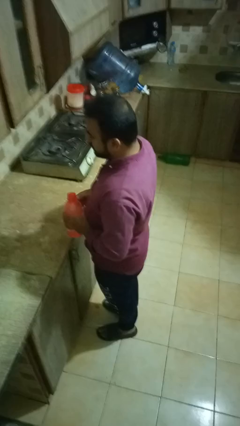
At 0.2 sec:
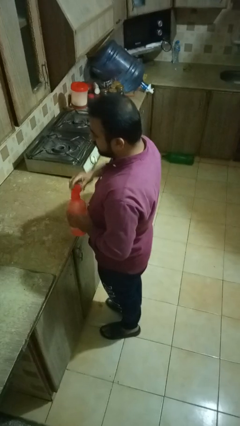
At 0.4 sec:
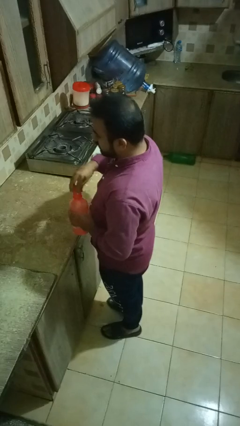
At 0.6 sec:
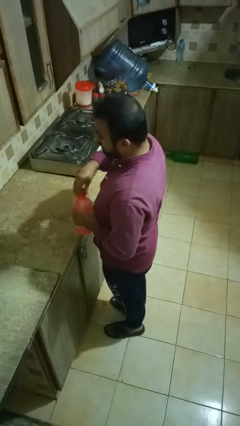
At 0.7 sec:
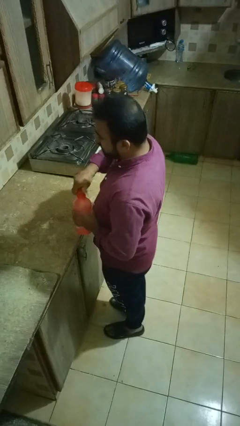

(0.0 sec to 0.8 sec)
person screws lid to bottle

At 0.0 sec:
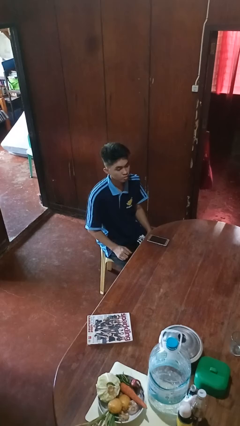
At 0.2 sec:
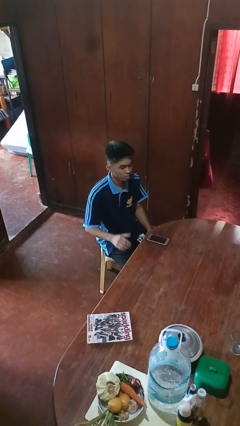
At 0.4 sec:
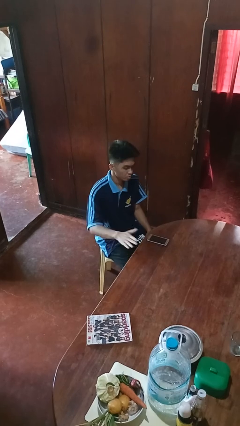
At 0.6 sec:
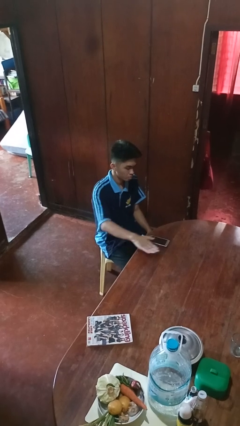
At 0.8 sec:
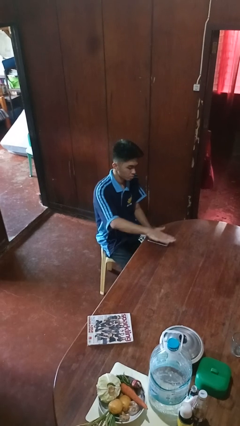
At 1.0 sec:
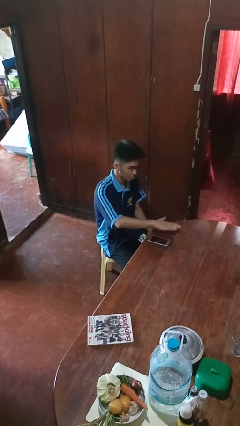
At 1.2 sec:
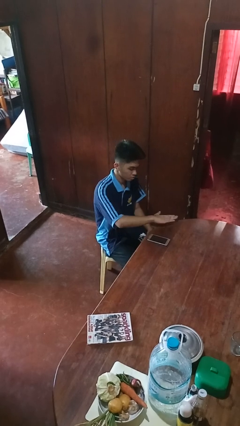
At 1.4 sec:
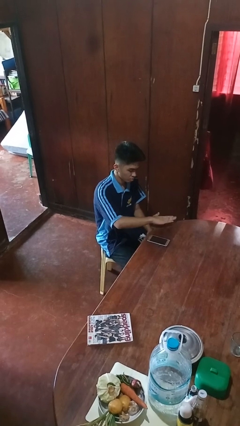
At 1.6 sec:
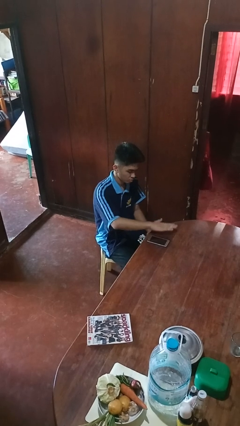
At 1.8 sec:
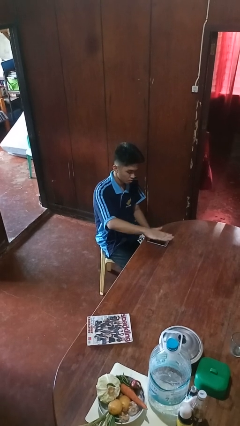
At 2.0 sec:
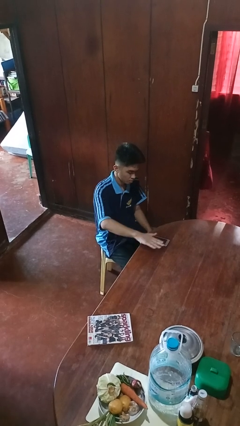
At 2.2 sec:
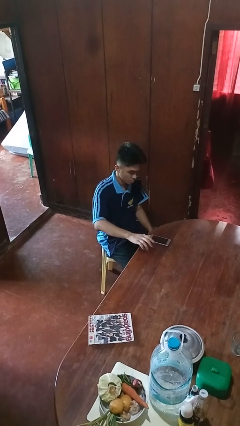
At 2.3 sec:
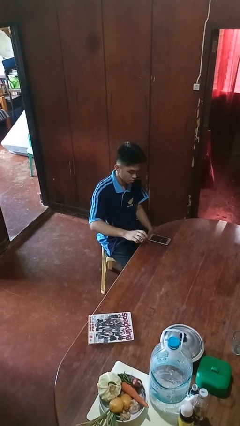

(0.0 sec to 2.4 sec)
person waves hand over object

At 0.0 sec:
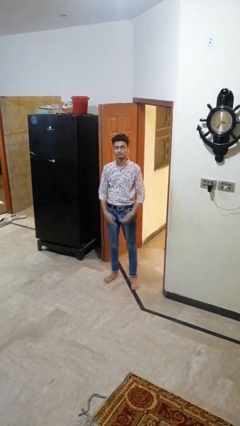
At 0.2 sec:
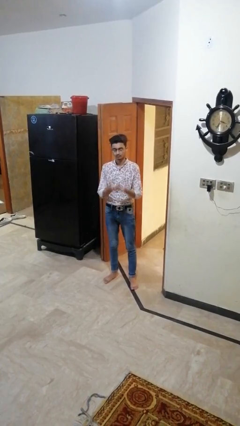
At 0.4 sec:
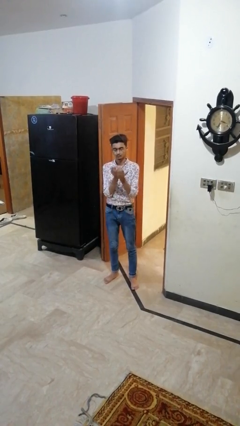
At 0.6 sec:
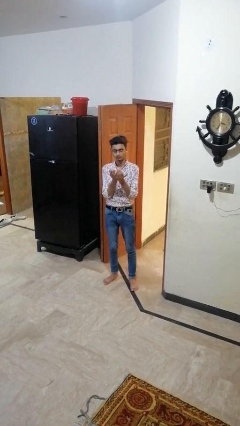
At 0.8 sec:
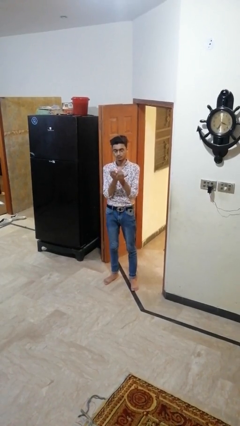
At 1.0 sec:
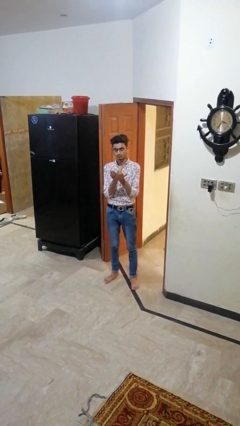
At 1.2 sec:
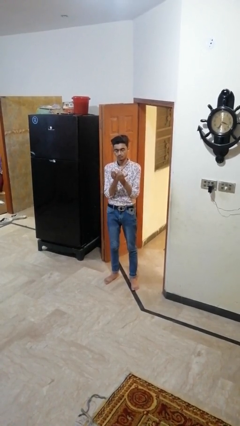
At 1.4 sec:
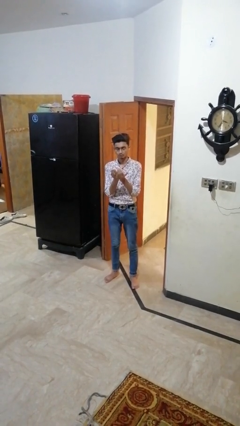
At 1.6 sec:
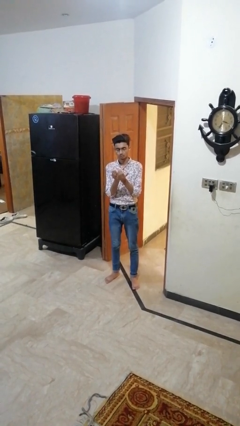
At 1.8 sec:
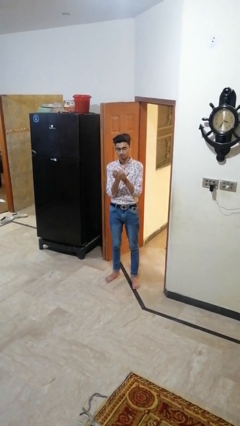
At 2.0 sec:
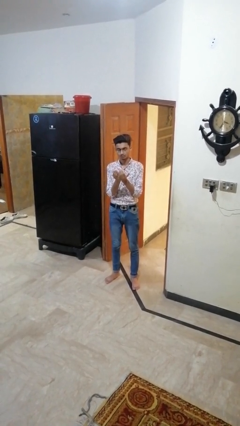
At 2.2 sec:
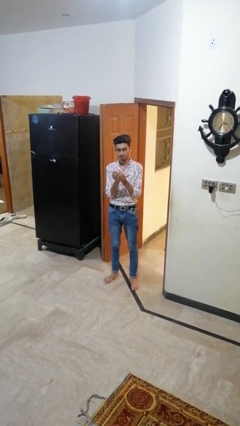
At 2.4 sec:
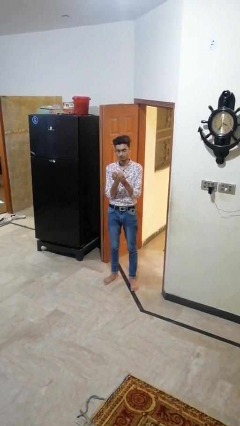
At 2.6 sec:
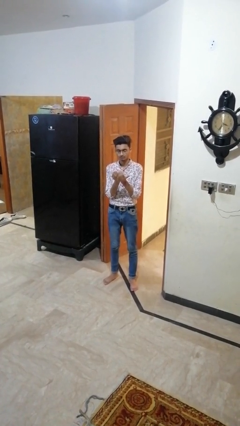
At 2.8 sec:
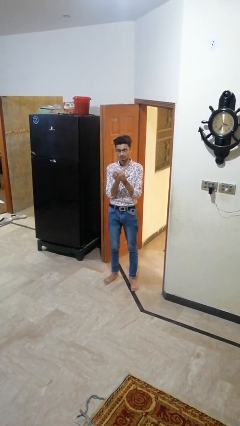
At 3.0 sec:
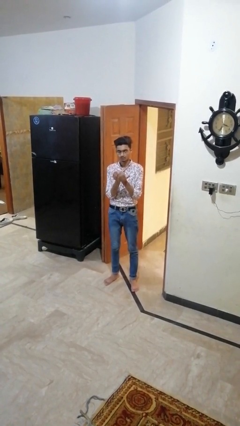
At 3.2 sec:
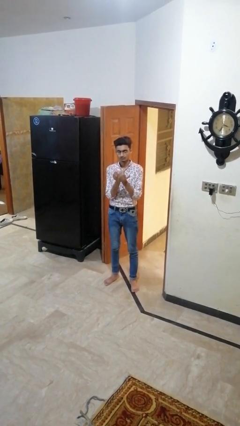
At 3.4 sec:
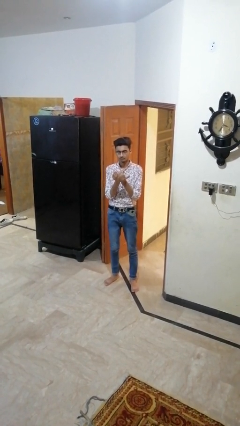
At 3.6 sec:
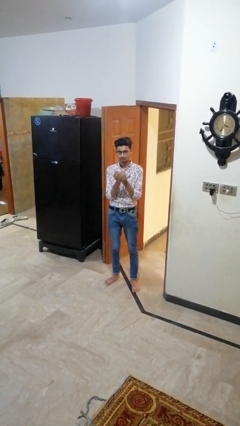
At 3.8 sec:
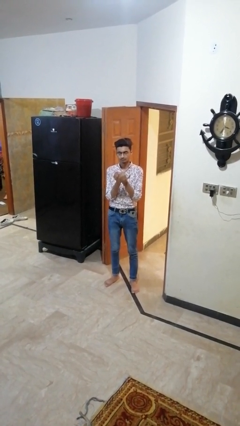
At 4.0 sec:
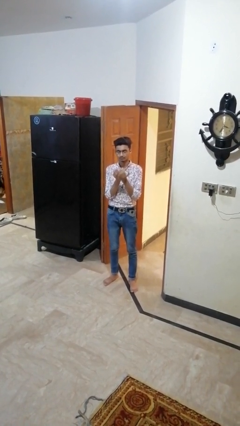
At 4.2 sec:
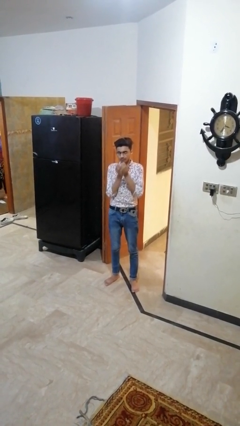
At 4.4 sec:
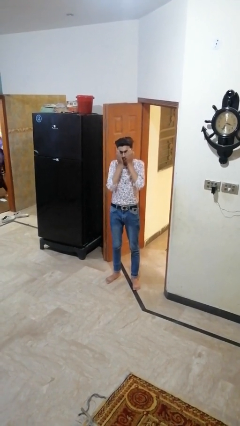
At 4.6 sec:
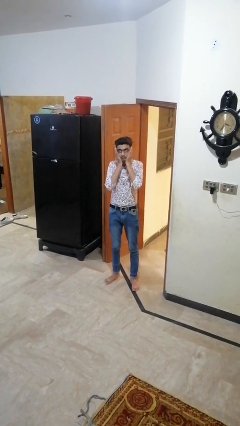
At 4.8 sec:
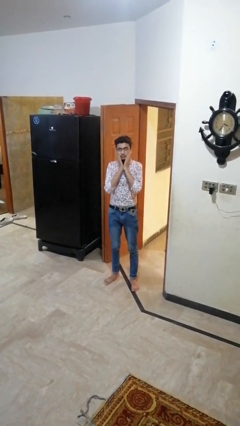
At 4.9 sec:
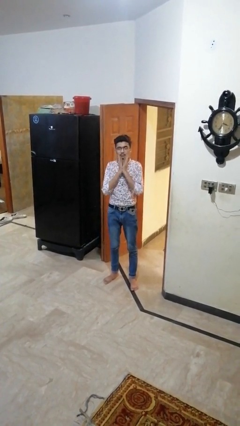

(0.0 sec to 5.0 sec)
person prays

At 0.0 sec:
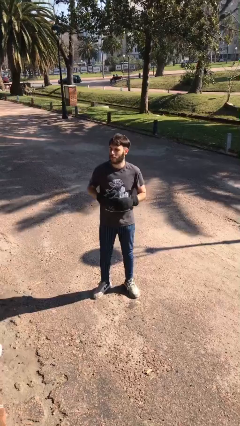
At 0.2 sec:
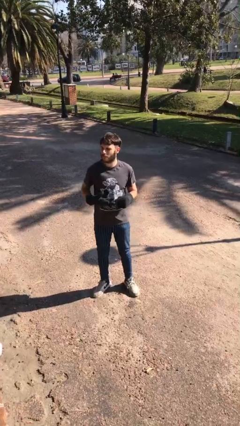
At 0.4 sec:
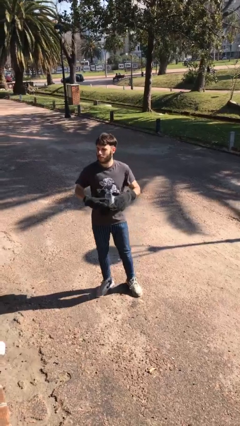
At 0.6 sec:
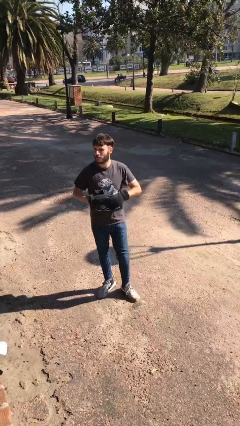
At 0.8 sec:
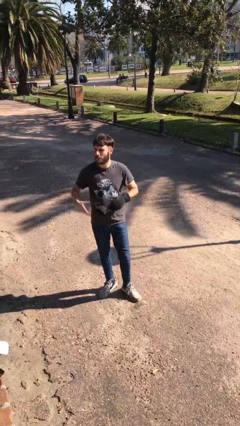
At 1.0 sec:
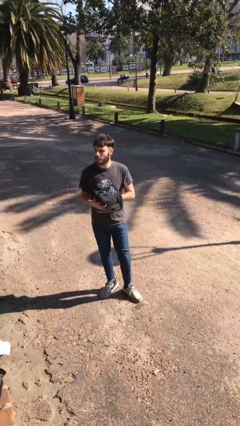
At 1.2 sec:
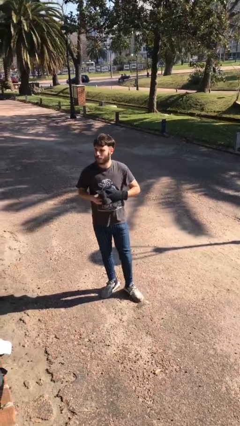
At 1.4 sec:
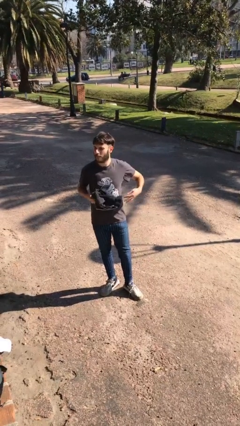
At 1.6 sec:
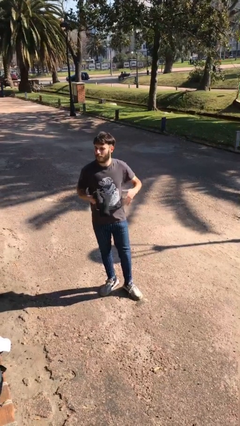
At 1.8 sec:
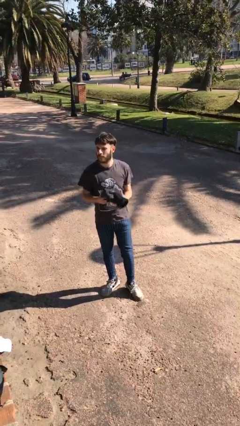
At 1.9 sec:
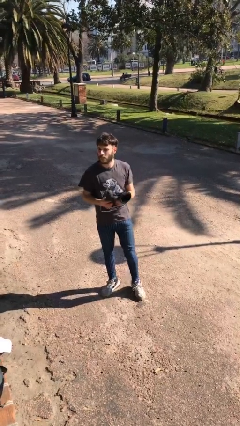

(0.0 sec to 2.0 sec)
person takes off gloves

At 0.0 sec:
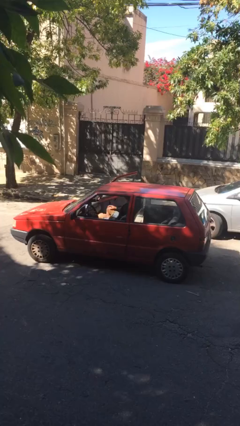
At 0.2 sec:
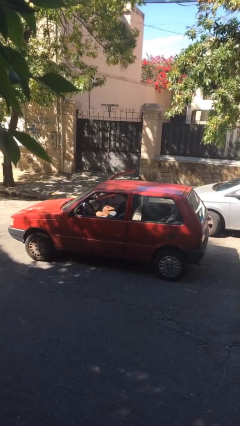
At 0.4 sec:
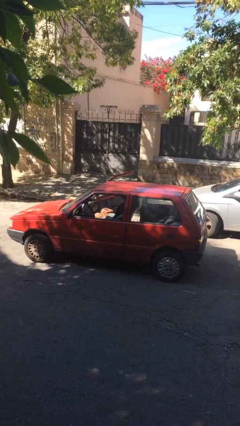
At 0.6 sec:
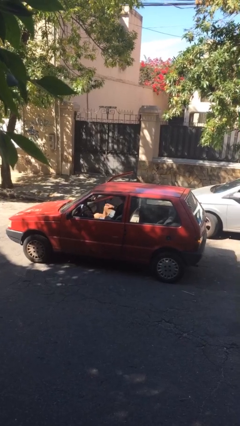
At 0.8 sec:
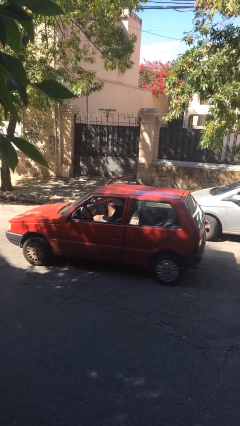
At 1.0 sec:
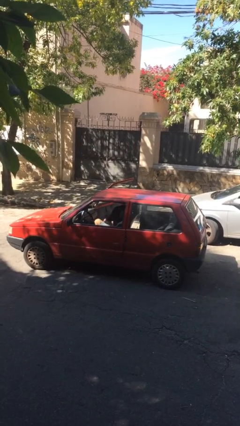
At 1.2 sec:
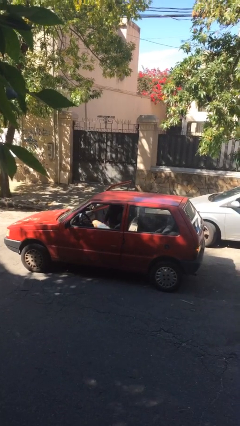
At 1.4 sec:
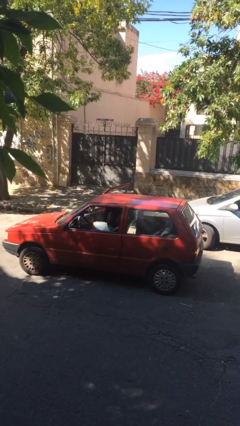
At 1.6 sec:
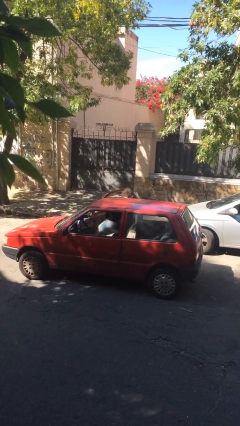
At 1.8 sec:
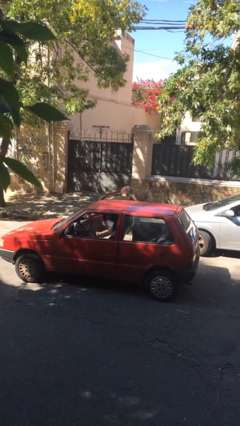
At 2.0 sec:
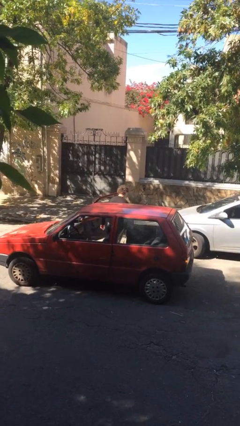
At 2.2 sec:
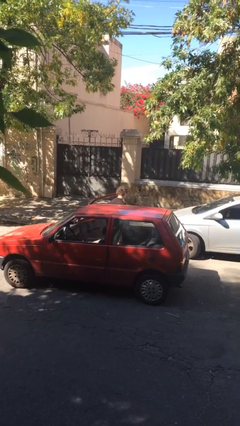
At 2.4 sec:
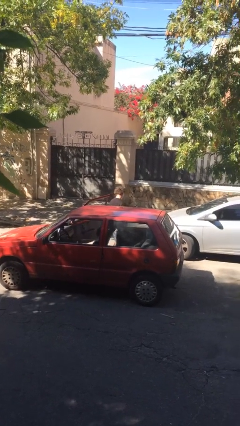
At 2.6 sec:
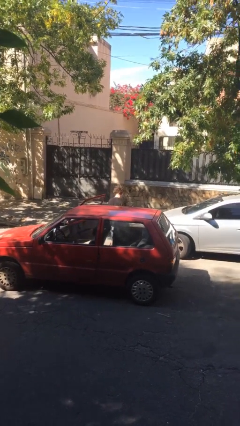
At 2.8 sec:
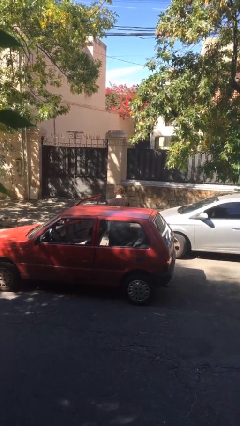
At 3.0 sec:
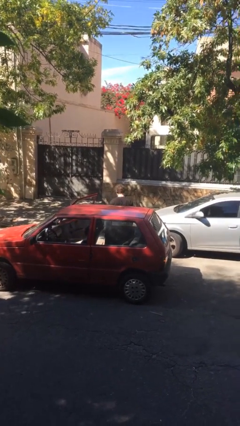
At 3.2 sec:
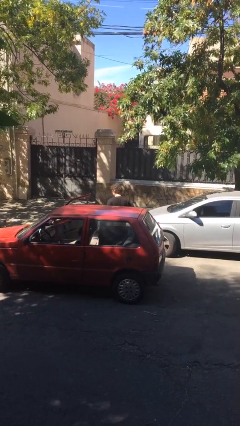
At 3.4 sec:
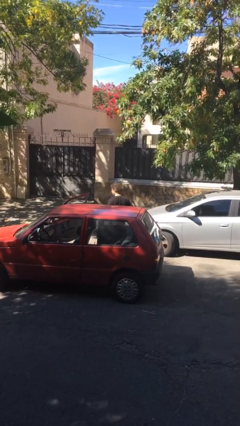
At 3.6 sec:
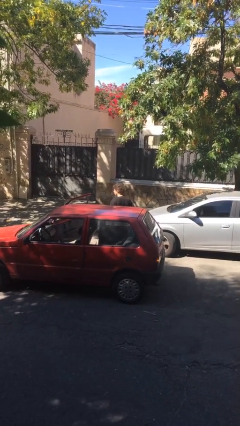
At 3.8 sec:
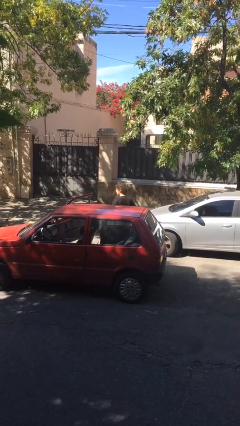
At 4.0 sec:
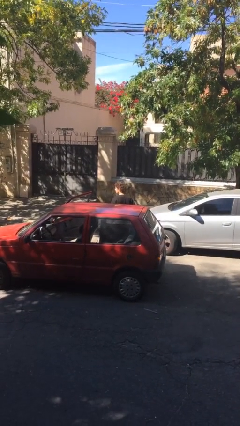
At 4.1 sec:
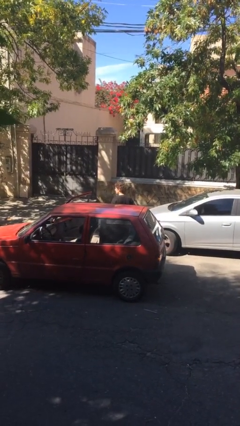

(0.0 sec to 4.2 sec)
person exits car

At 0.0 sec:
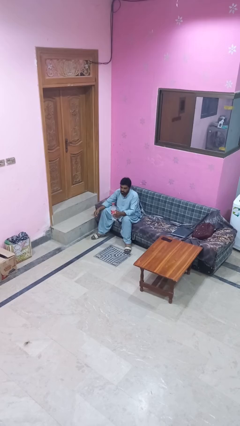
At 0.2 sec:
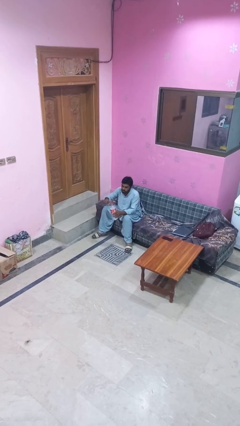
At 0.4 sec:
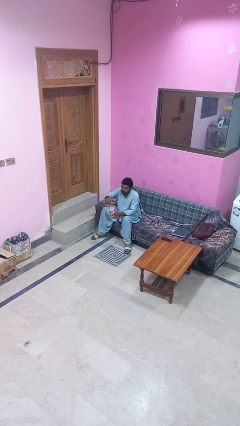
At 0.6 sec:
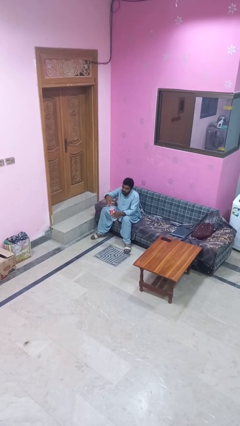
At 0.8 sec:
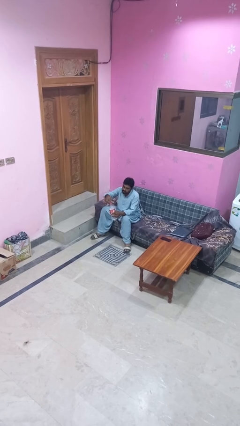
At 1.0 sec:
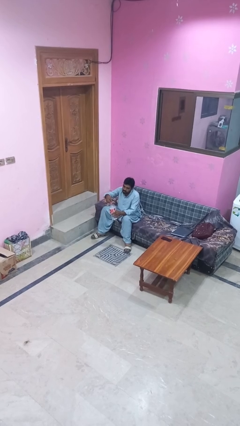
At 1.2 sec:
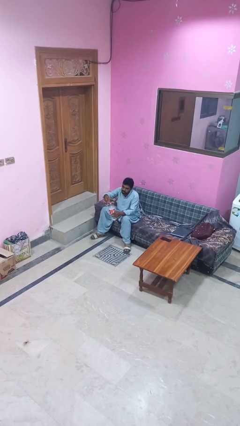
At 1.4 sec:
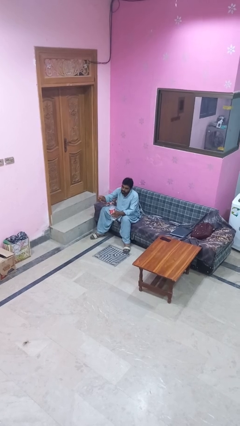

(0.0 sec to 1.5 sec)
person unscrews lid from bottle

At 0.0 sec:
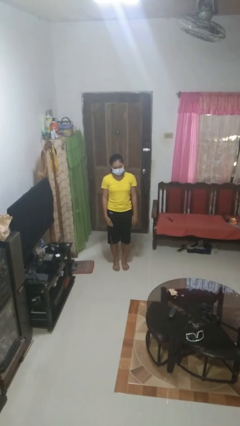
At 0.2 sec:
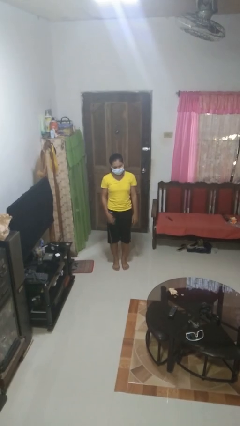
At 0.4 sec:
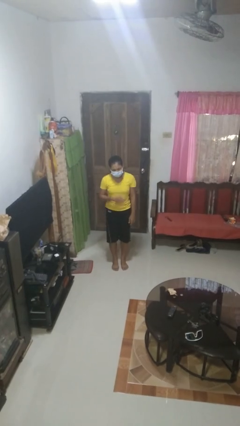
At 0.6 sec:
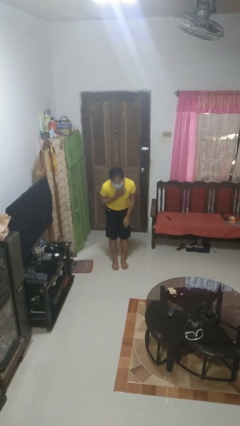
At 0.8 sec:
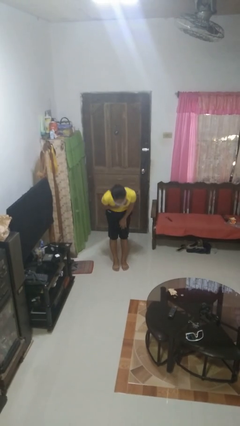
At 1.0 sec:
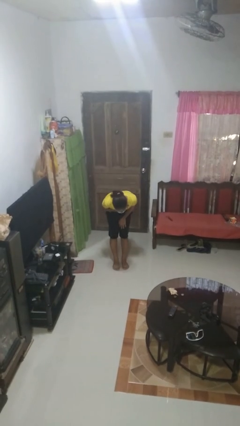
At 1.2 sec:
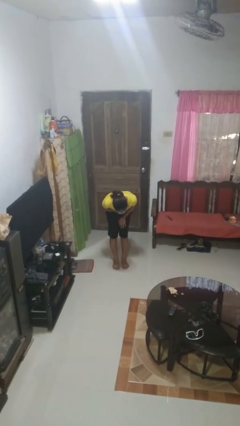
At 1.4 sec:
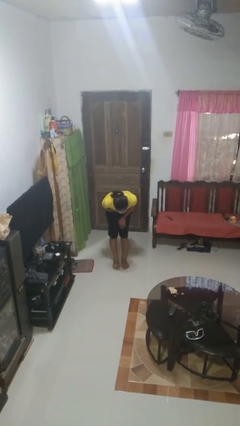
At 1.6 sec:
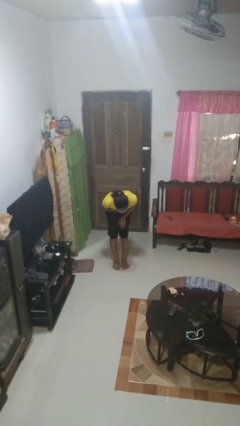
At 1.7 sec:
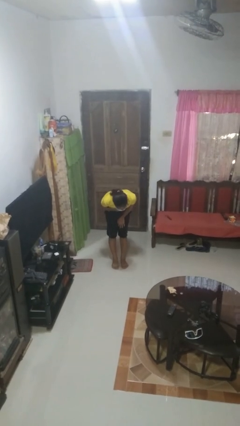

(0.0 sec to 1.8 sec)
person bows
